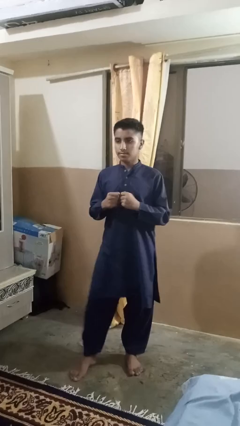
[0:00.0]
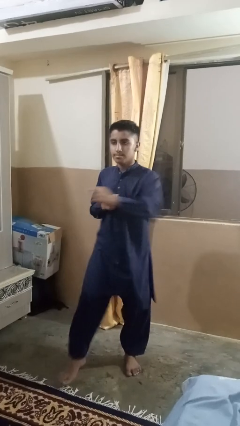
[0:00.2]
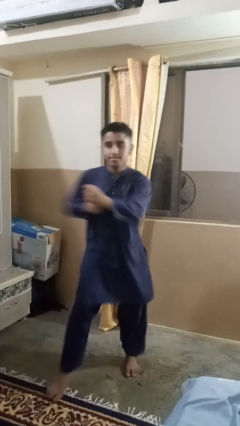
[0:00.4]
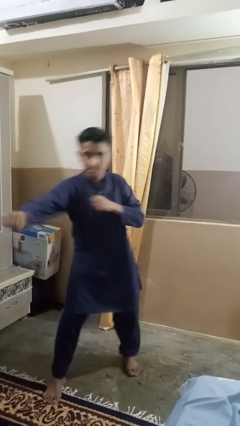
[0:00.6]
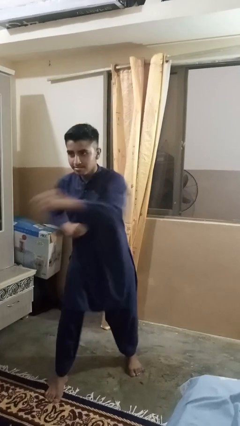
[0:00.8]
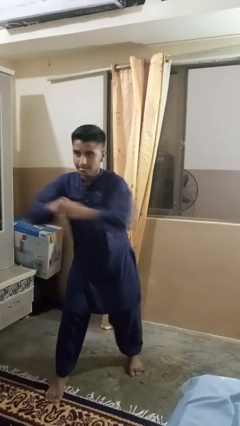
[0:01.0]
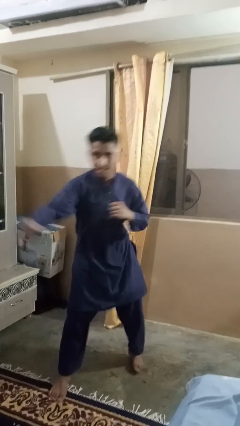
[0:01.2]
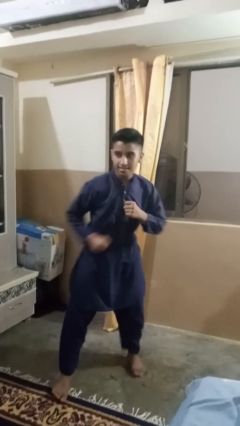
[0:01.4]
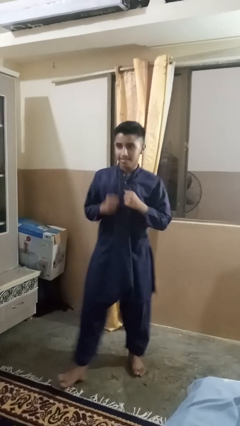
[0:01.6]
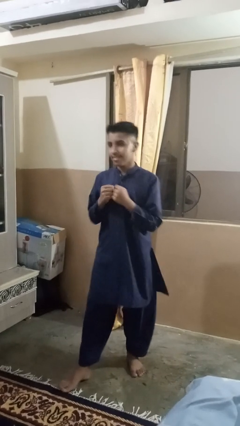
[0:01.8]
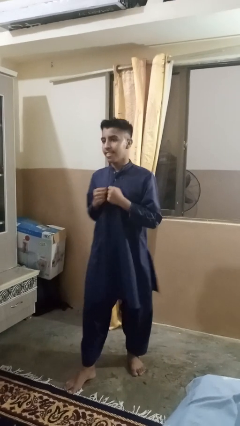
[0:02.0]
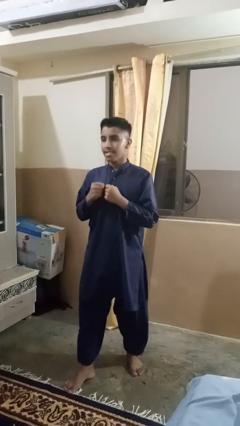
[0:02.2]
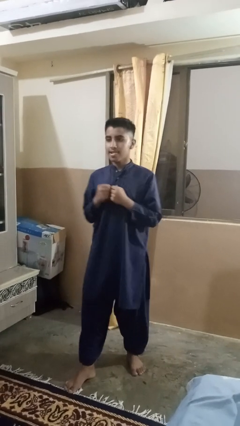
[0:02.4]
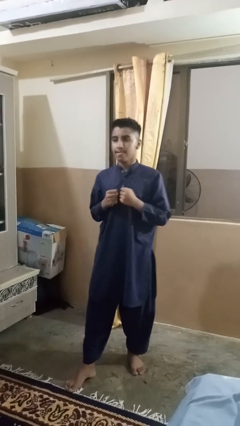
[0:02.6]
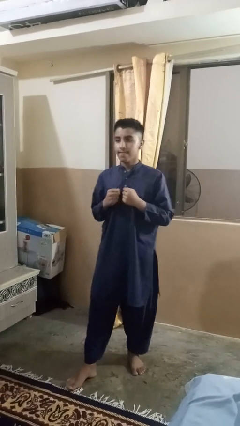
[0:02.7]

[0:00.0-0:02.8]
person punches

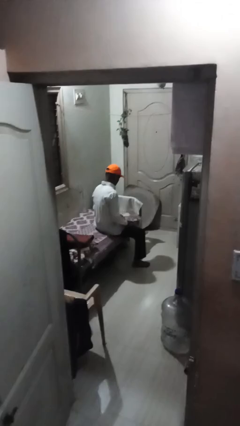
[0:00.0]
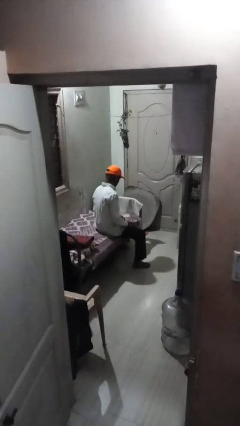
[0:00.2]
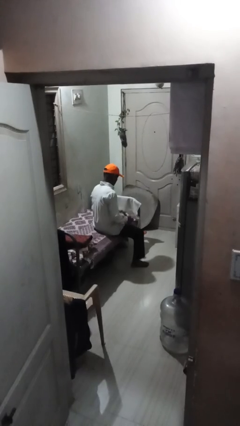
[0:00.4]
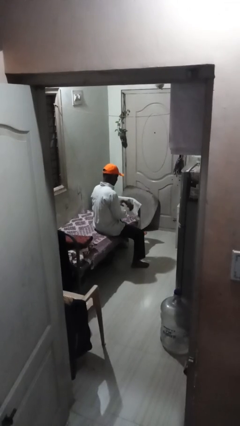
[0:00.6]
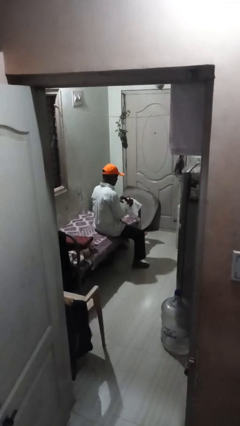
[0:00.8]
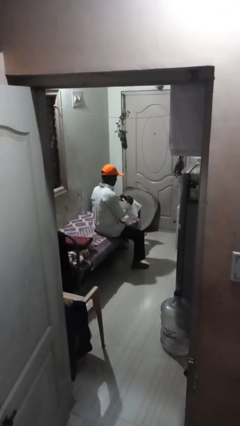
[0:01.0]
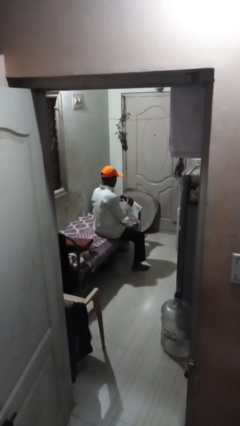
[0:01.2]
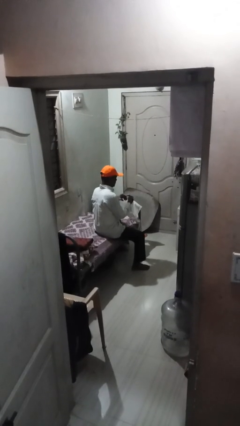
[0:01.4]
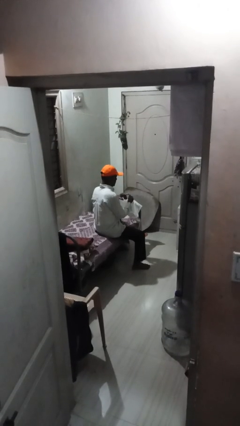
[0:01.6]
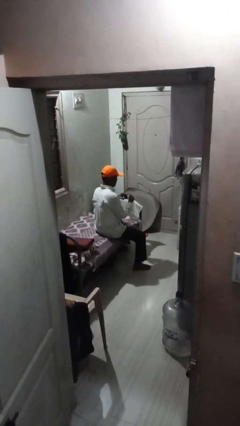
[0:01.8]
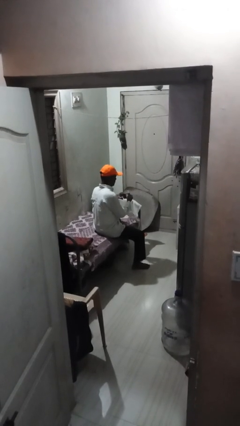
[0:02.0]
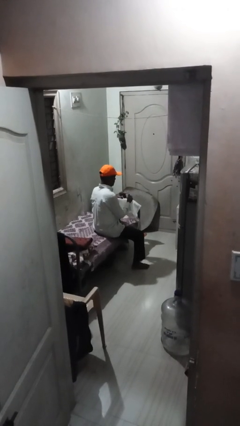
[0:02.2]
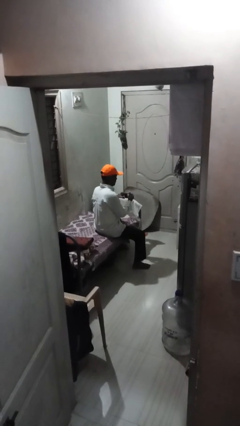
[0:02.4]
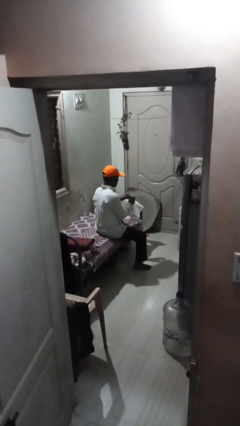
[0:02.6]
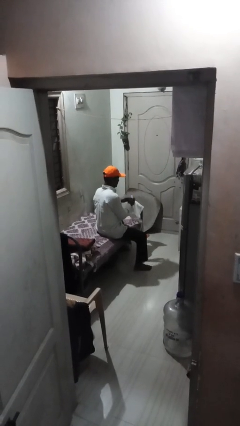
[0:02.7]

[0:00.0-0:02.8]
person files fingernails

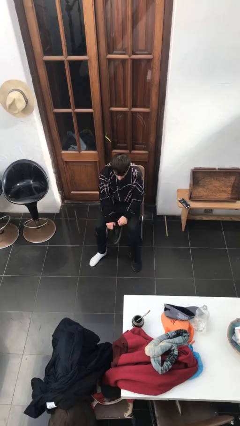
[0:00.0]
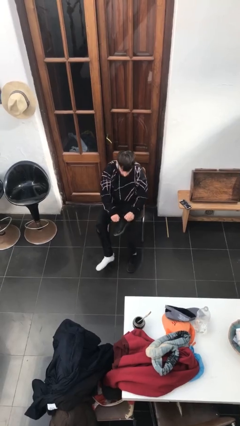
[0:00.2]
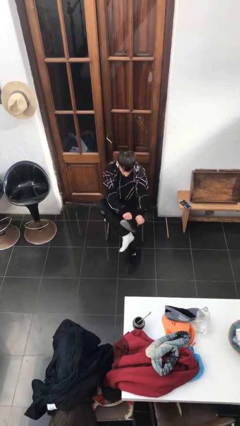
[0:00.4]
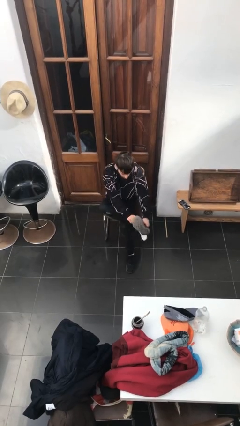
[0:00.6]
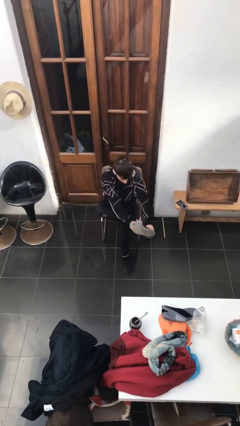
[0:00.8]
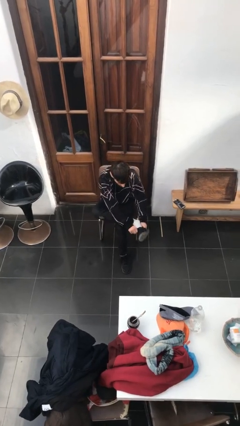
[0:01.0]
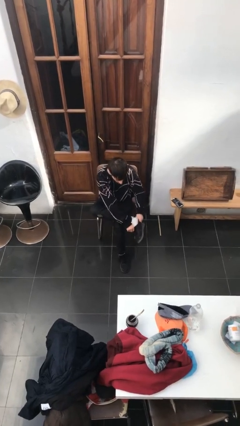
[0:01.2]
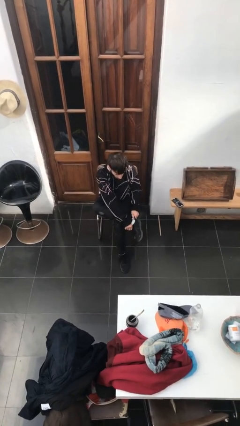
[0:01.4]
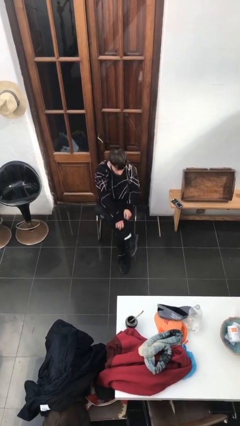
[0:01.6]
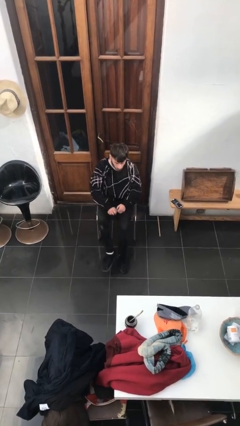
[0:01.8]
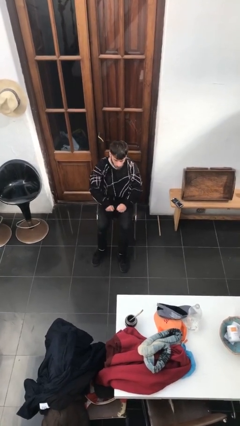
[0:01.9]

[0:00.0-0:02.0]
person puts on shoes

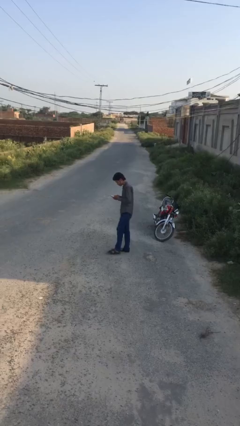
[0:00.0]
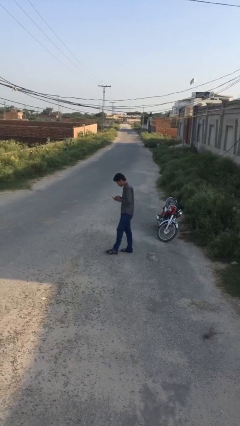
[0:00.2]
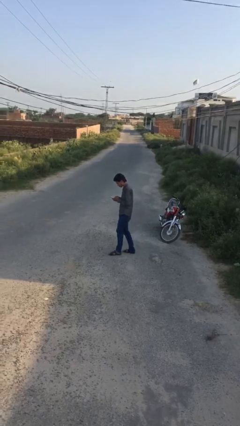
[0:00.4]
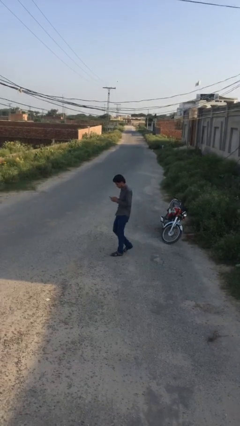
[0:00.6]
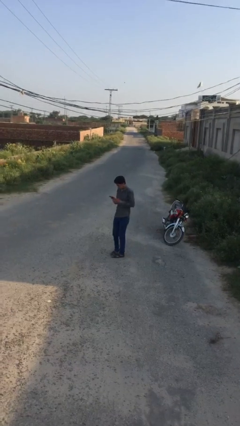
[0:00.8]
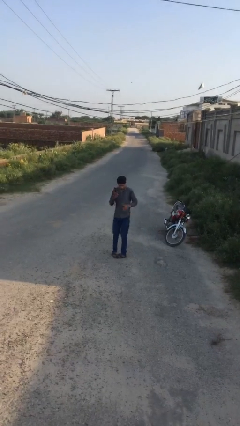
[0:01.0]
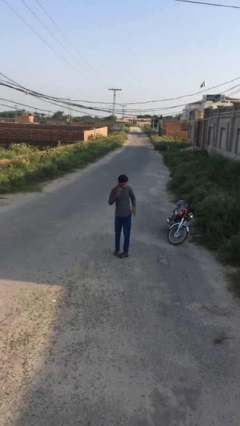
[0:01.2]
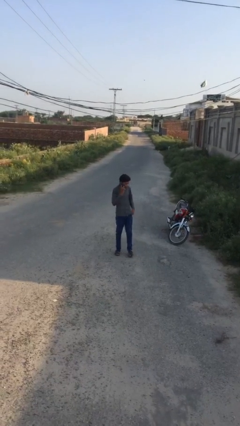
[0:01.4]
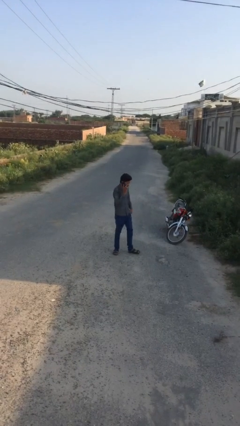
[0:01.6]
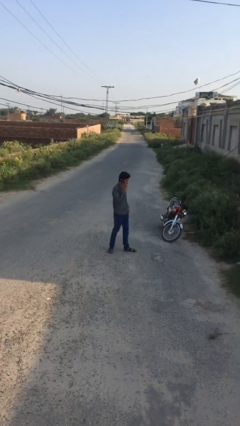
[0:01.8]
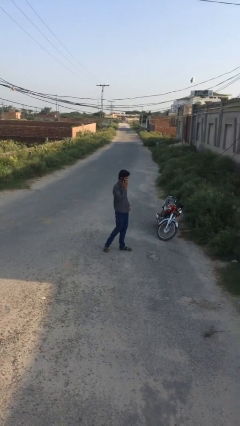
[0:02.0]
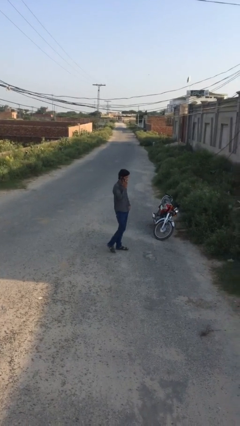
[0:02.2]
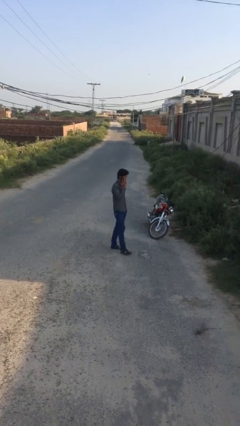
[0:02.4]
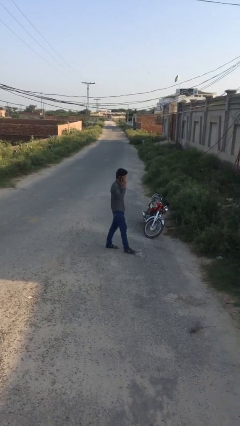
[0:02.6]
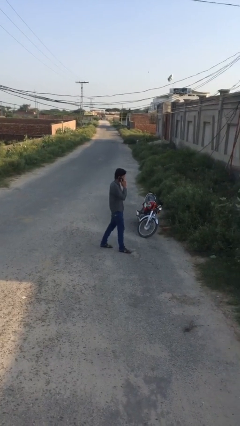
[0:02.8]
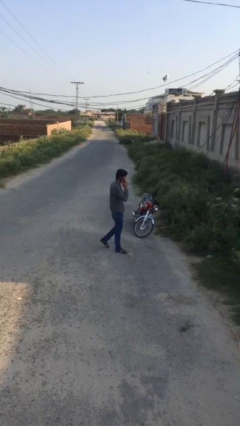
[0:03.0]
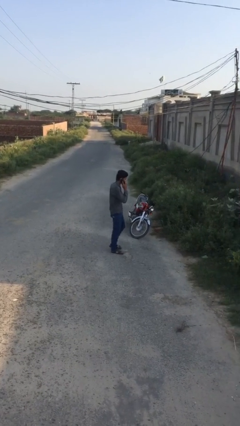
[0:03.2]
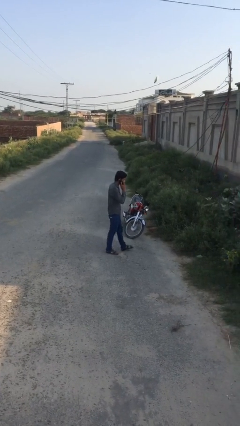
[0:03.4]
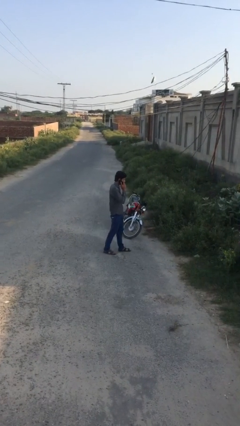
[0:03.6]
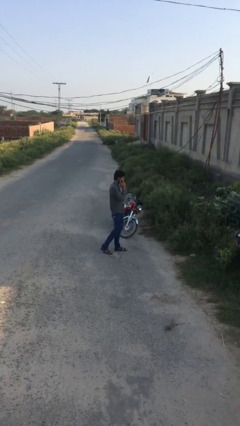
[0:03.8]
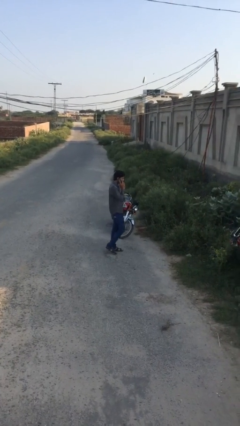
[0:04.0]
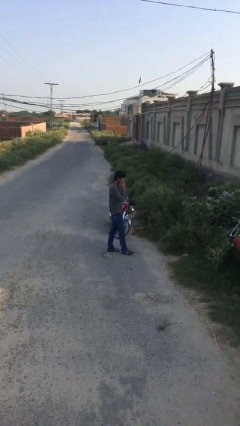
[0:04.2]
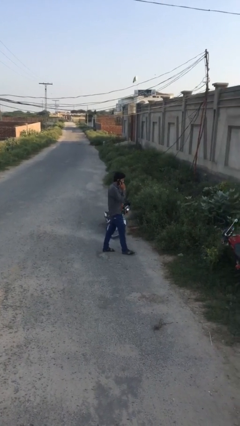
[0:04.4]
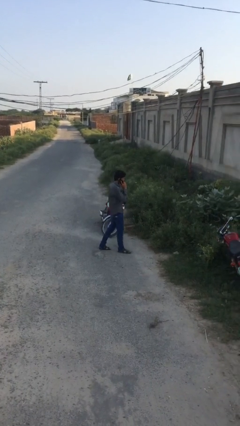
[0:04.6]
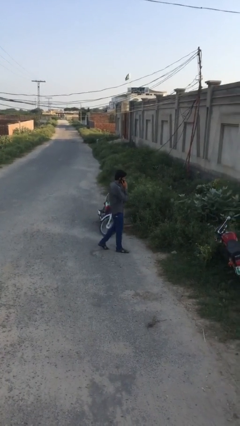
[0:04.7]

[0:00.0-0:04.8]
person talks on phone

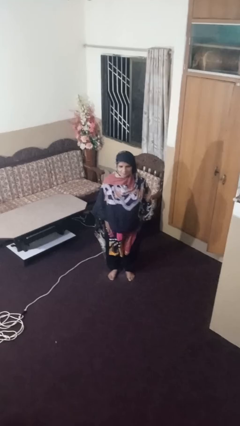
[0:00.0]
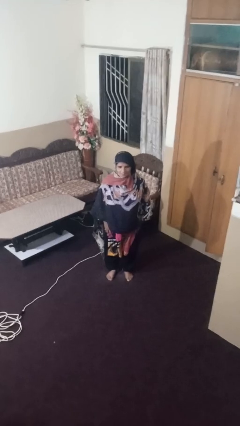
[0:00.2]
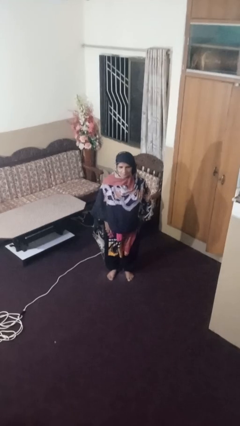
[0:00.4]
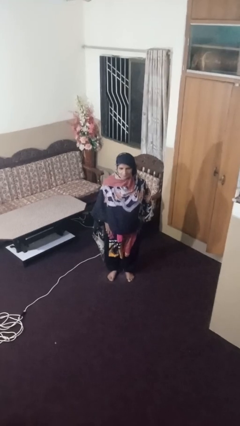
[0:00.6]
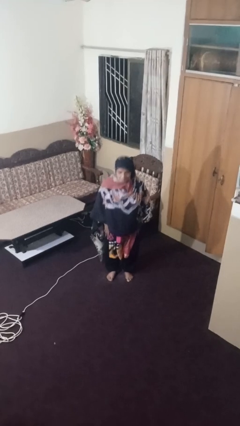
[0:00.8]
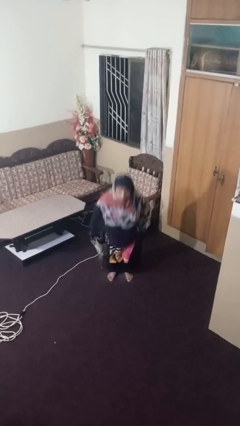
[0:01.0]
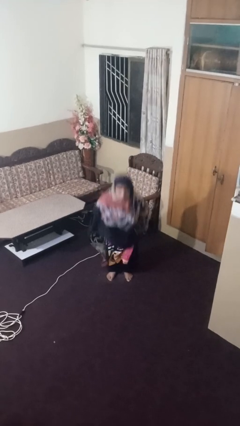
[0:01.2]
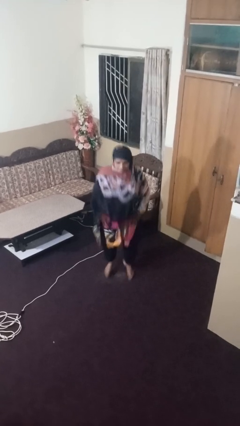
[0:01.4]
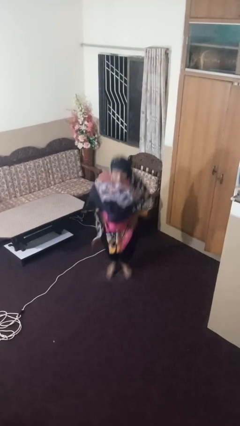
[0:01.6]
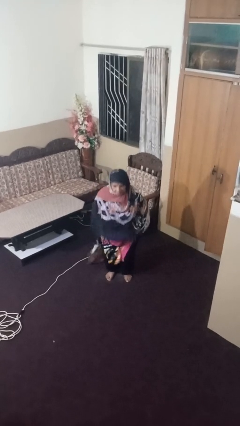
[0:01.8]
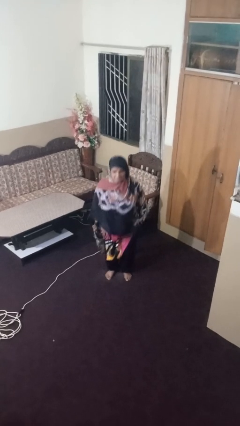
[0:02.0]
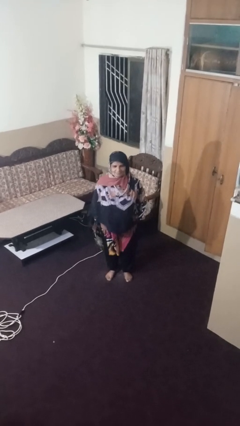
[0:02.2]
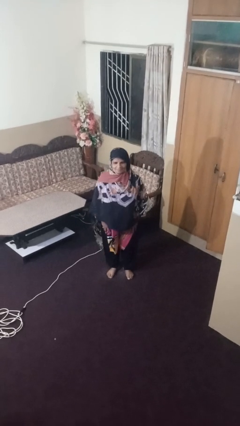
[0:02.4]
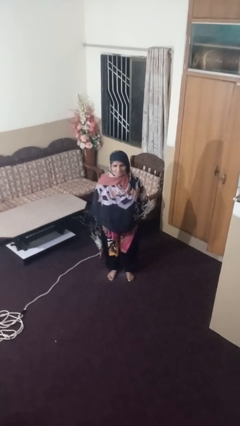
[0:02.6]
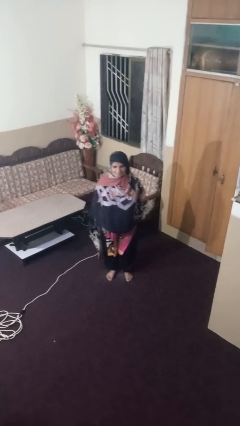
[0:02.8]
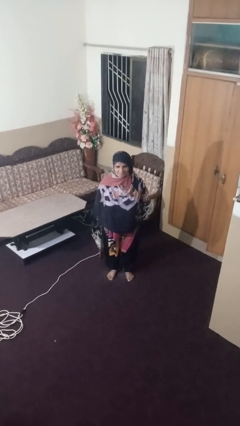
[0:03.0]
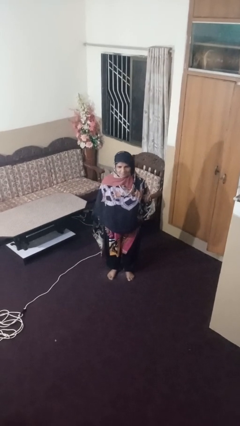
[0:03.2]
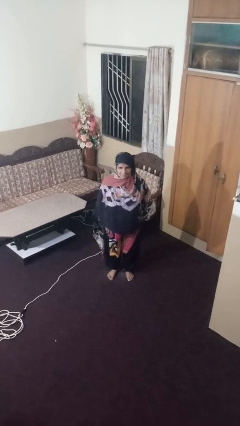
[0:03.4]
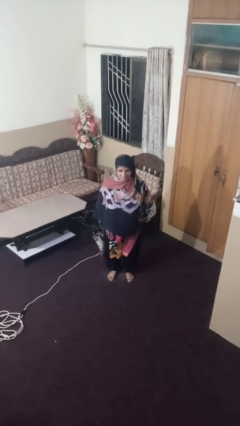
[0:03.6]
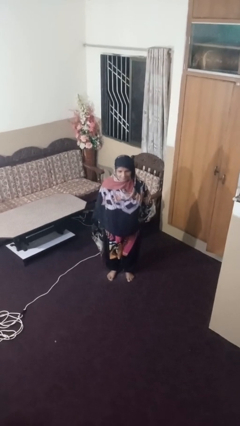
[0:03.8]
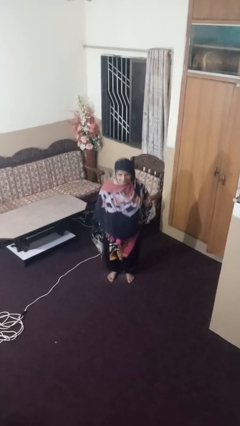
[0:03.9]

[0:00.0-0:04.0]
person jumps

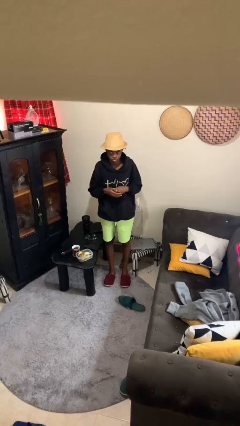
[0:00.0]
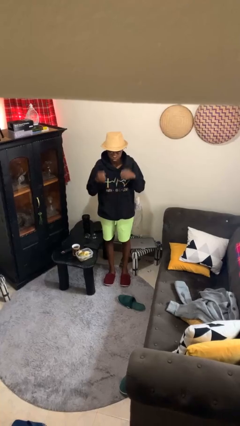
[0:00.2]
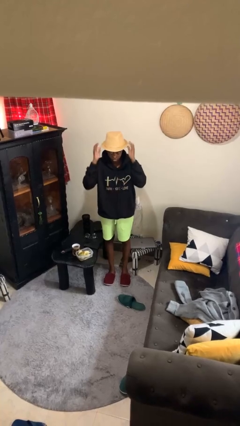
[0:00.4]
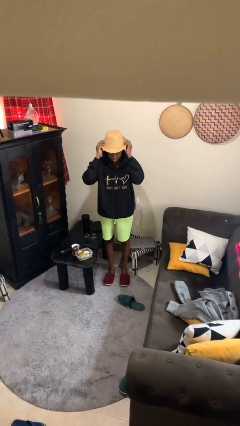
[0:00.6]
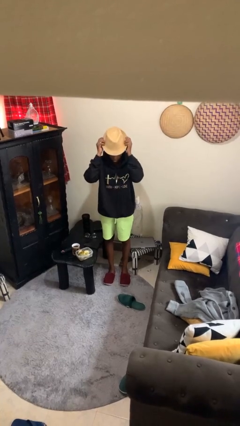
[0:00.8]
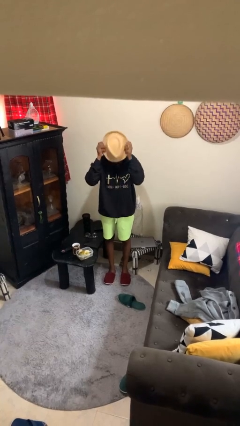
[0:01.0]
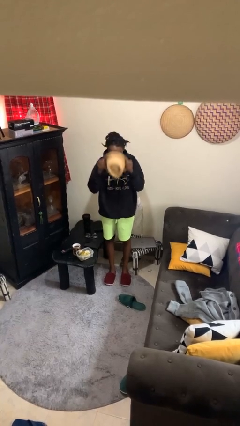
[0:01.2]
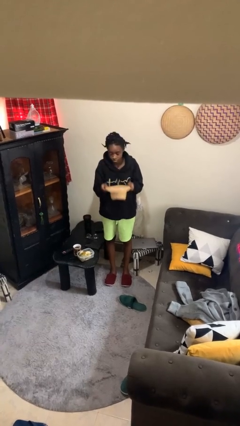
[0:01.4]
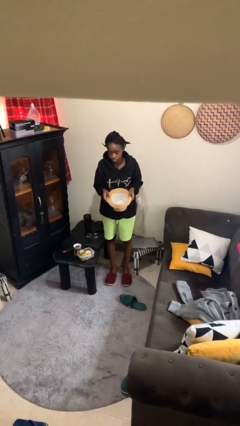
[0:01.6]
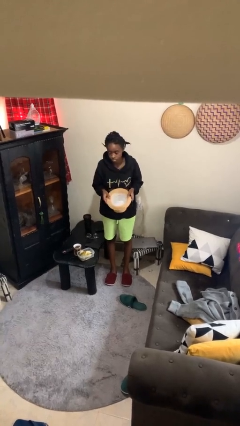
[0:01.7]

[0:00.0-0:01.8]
person takes off hat
